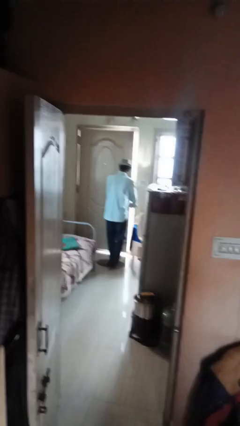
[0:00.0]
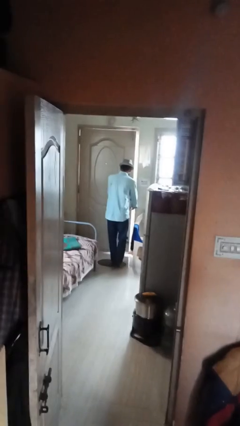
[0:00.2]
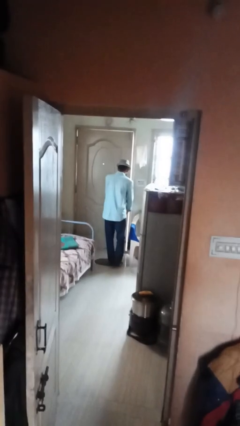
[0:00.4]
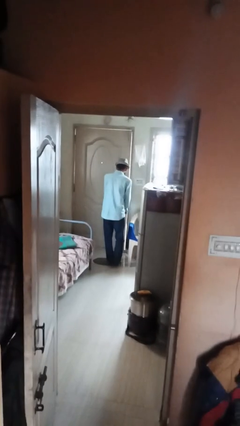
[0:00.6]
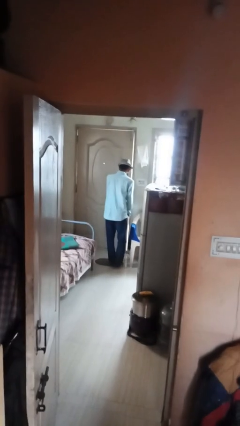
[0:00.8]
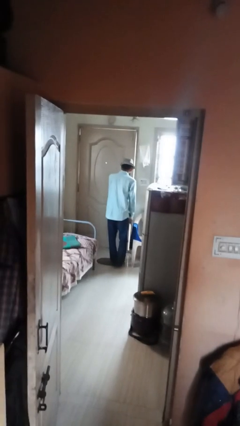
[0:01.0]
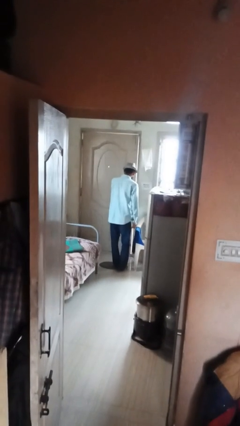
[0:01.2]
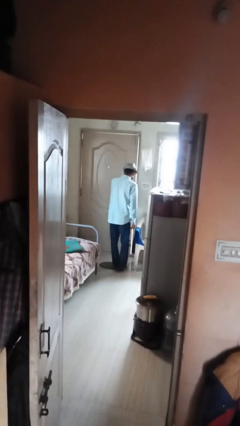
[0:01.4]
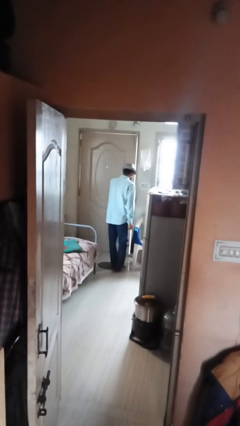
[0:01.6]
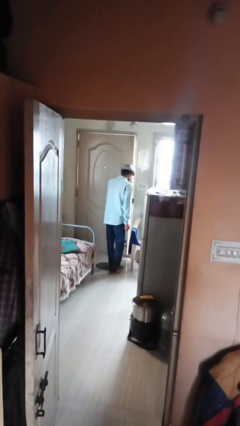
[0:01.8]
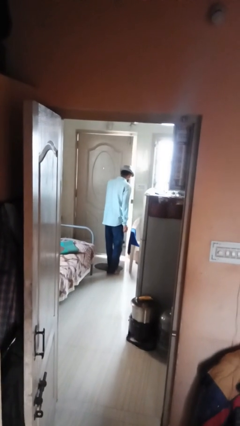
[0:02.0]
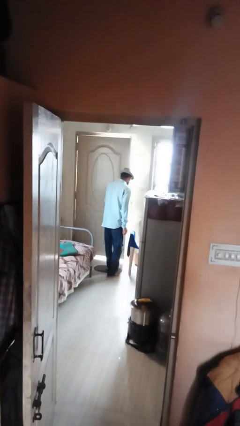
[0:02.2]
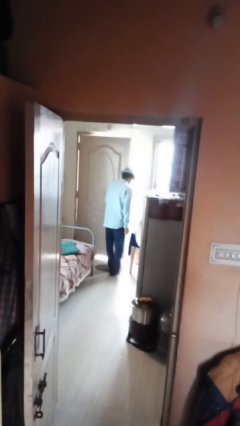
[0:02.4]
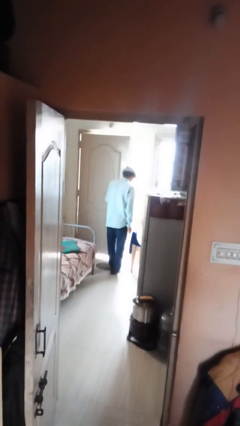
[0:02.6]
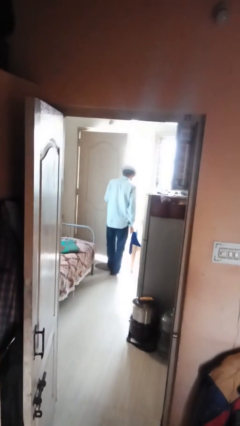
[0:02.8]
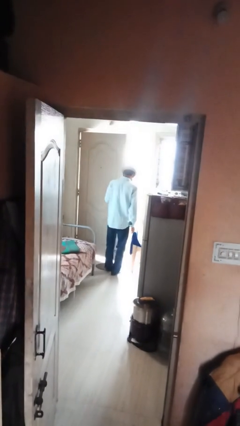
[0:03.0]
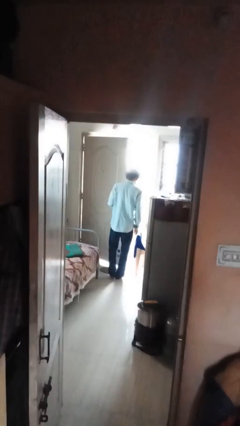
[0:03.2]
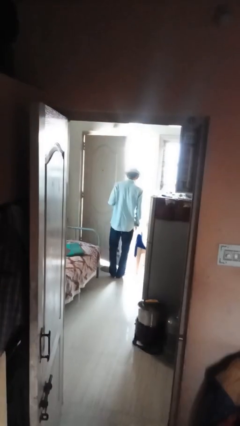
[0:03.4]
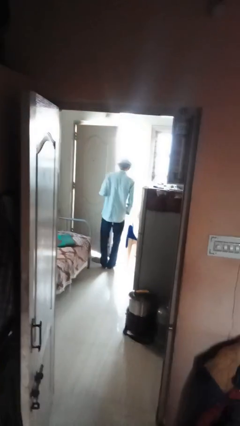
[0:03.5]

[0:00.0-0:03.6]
person closes facility door

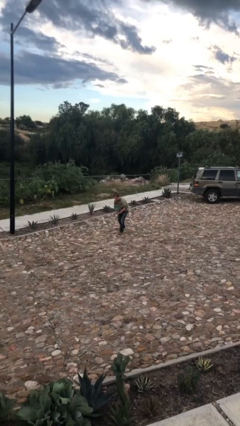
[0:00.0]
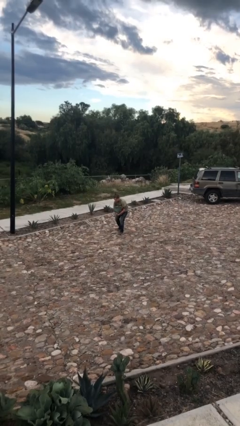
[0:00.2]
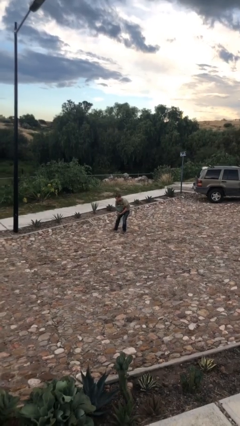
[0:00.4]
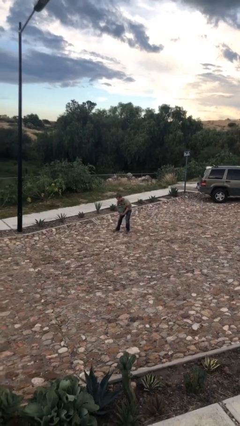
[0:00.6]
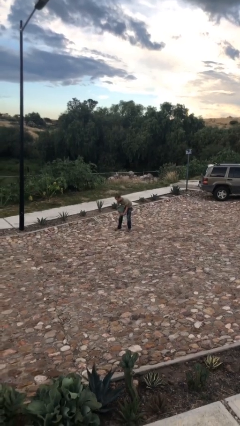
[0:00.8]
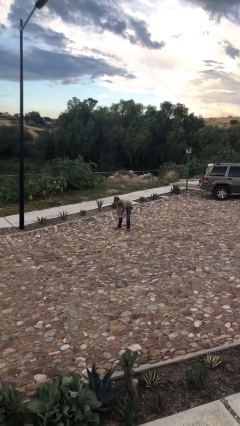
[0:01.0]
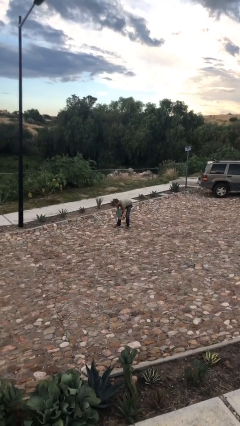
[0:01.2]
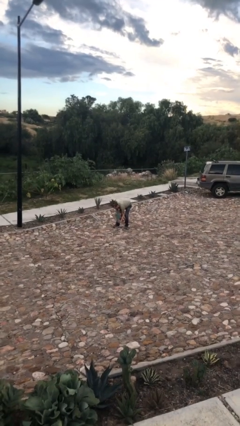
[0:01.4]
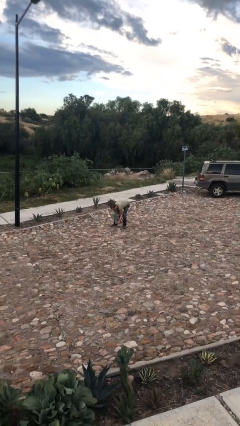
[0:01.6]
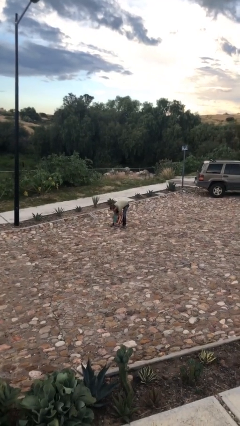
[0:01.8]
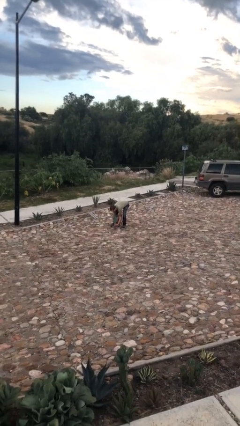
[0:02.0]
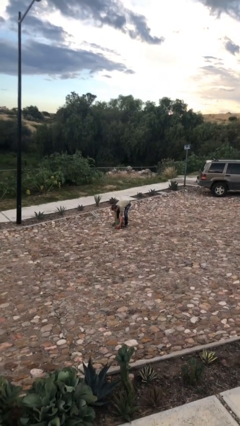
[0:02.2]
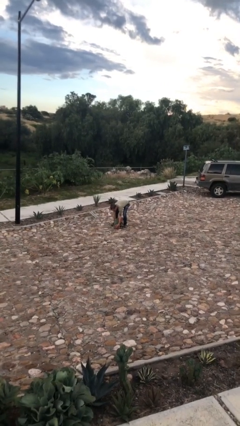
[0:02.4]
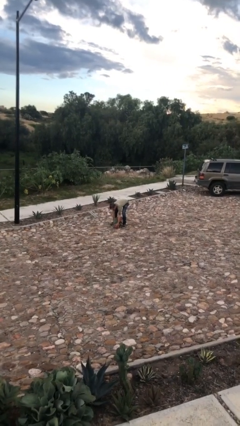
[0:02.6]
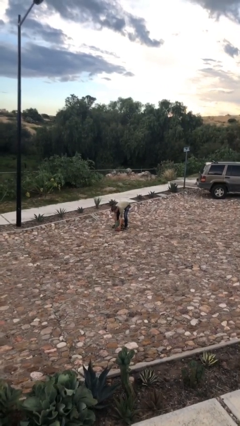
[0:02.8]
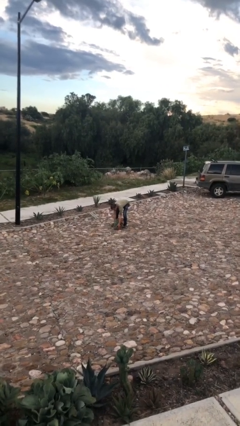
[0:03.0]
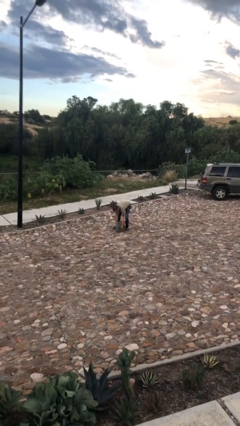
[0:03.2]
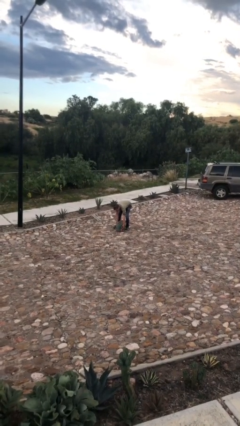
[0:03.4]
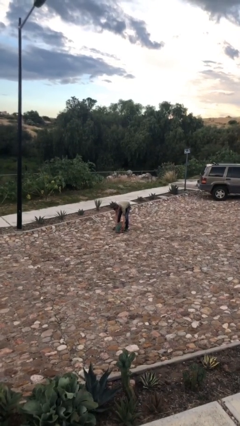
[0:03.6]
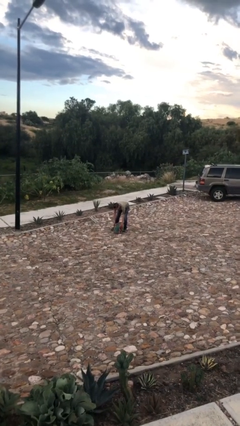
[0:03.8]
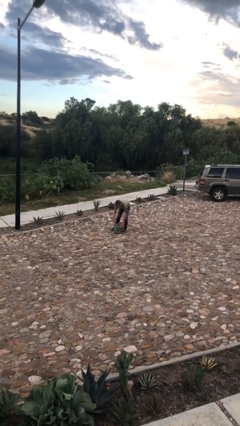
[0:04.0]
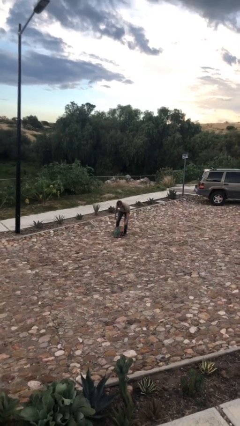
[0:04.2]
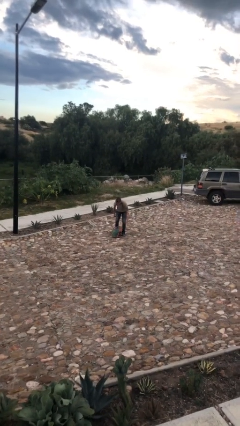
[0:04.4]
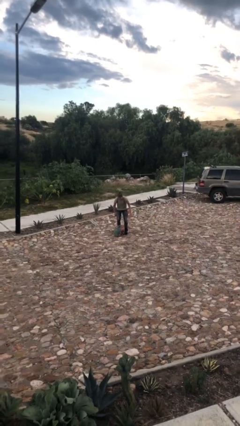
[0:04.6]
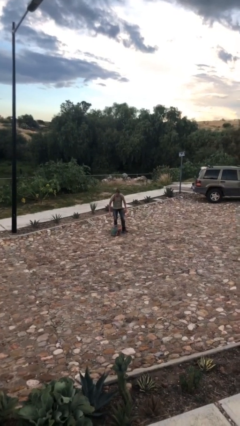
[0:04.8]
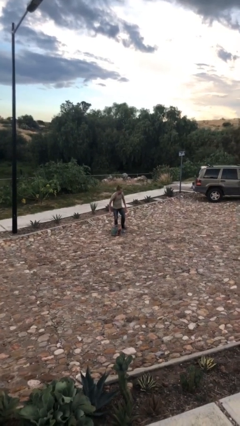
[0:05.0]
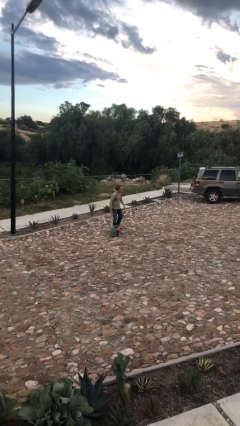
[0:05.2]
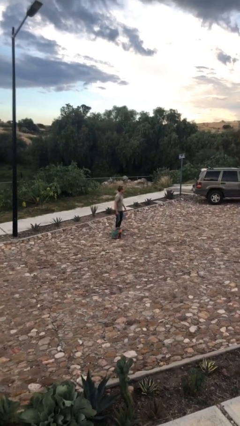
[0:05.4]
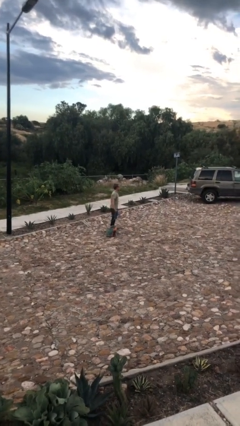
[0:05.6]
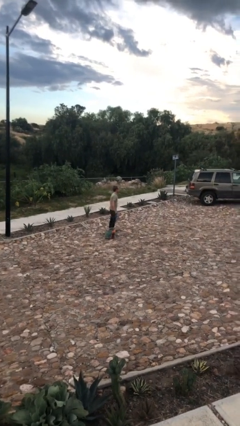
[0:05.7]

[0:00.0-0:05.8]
person puts down object on floor

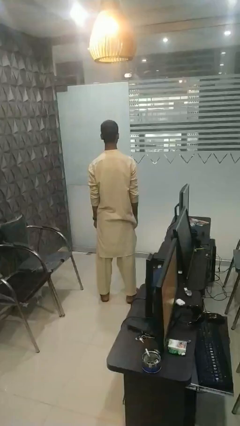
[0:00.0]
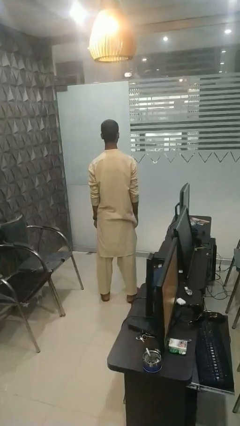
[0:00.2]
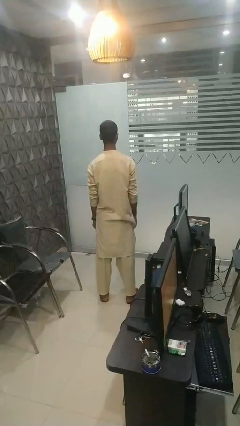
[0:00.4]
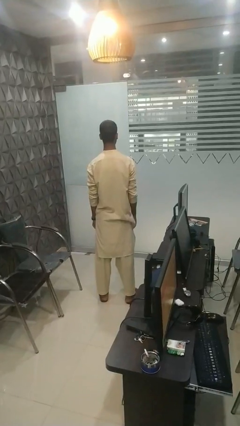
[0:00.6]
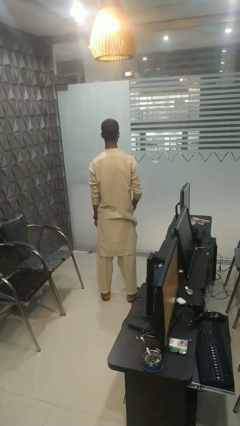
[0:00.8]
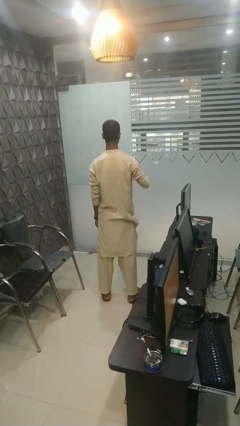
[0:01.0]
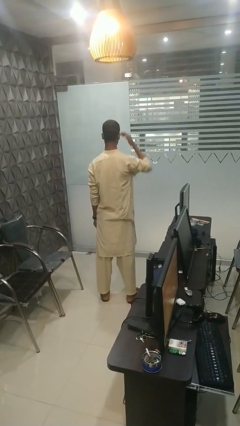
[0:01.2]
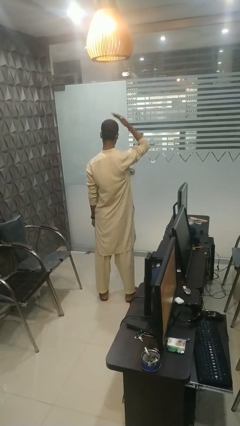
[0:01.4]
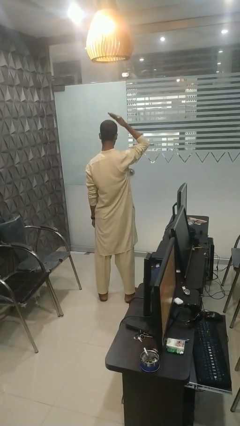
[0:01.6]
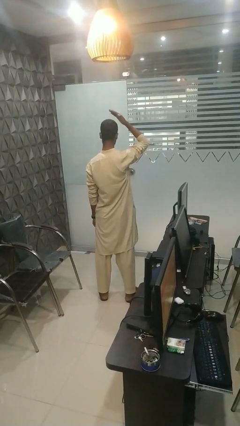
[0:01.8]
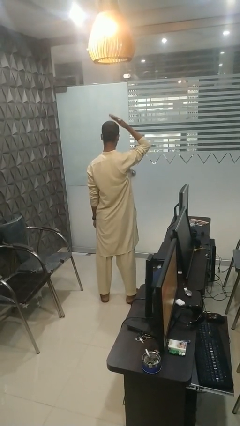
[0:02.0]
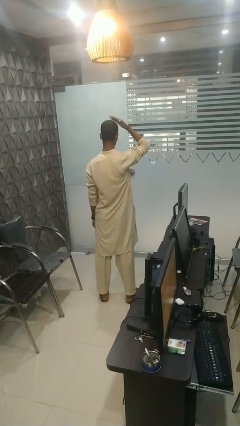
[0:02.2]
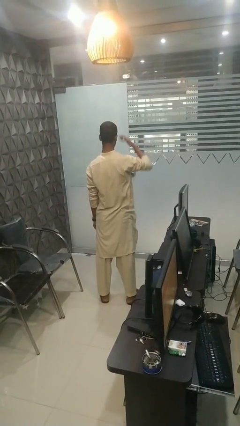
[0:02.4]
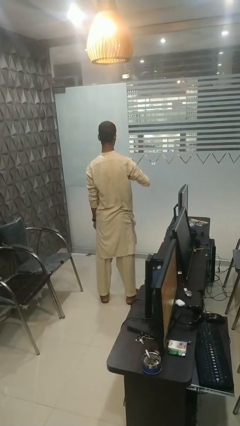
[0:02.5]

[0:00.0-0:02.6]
person pats head

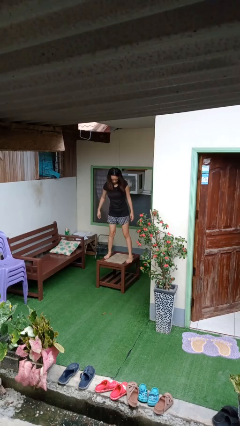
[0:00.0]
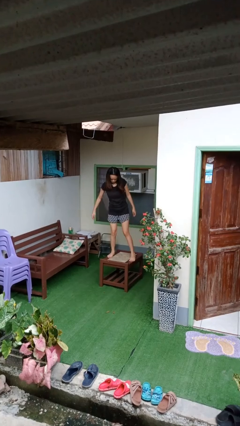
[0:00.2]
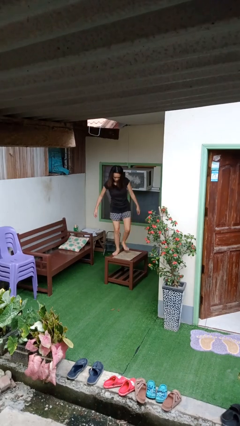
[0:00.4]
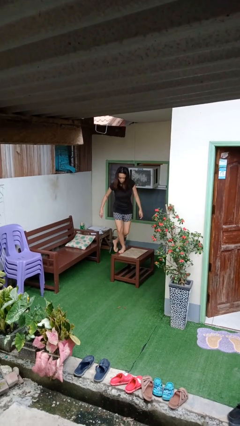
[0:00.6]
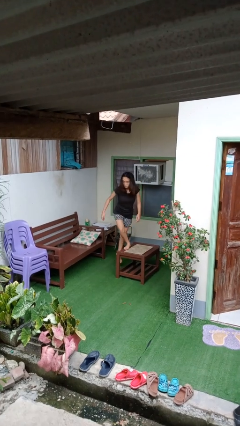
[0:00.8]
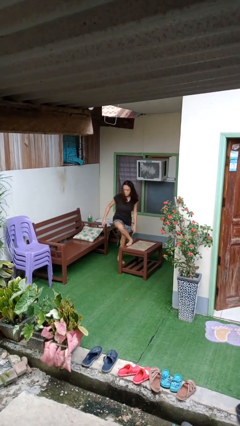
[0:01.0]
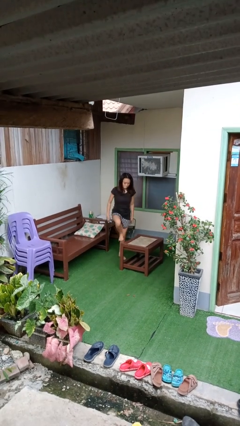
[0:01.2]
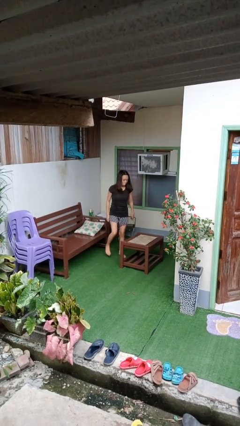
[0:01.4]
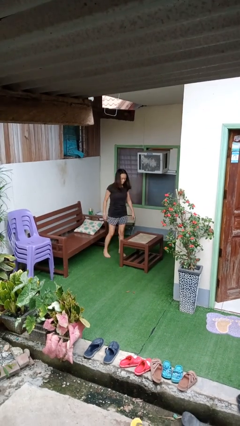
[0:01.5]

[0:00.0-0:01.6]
person climbs off table

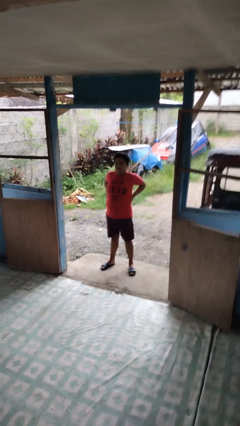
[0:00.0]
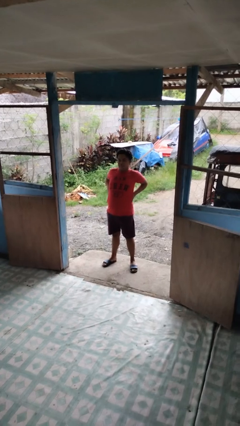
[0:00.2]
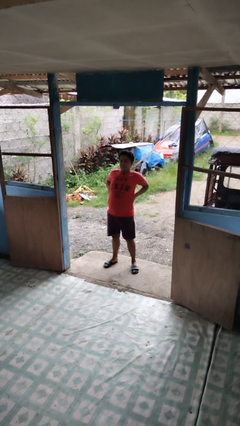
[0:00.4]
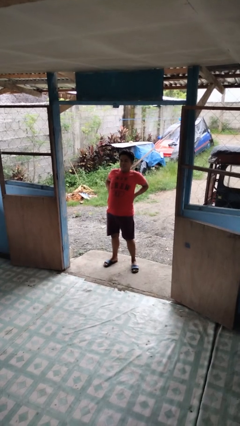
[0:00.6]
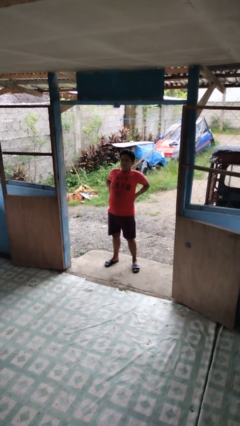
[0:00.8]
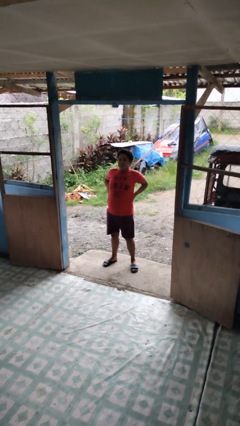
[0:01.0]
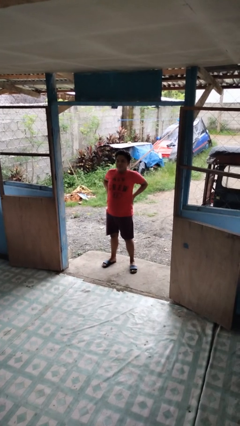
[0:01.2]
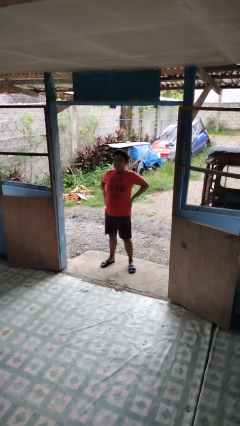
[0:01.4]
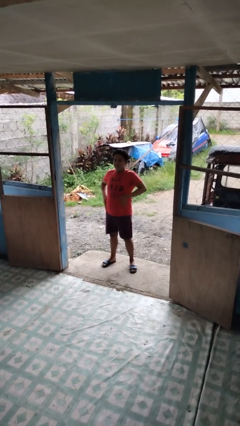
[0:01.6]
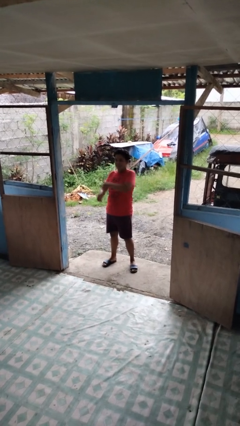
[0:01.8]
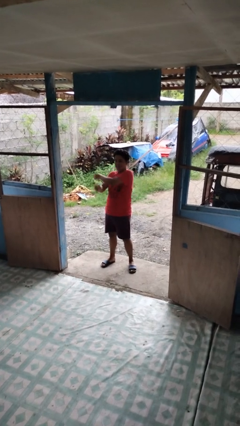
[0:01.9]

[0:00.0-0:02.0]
person stretches back

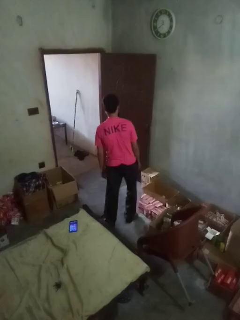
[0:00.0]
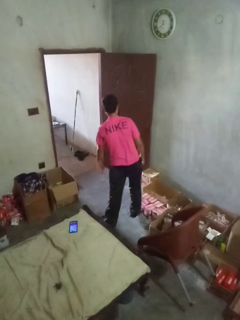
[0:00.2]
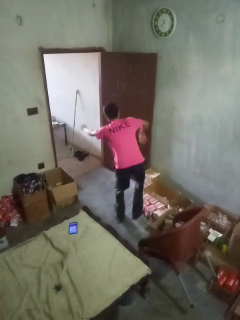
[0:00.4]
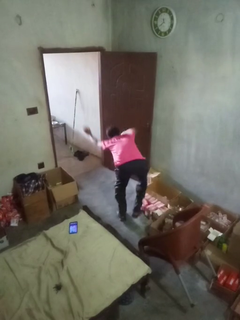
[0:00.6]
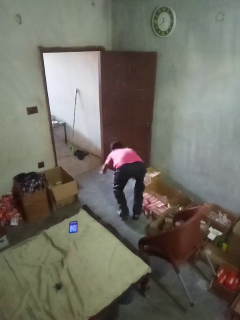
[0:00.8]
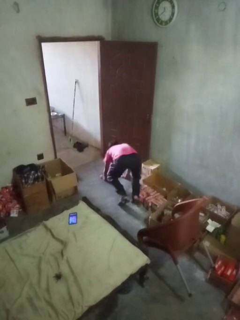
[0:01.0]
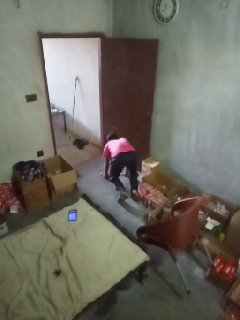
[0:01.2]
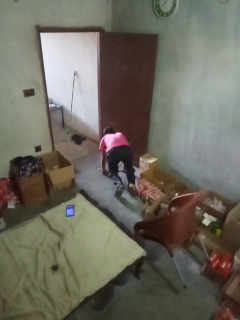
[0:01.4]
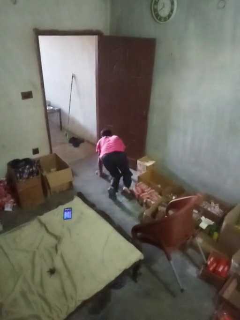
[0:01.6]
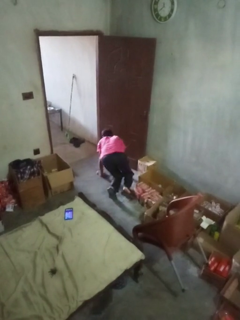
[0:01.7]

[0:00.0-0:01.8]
person trips on object on floor

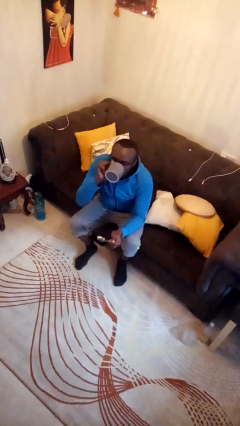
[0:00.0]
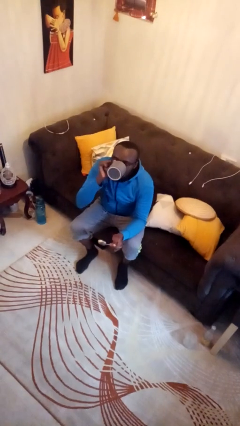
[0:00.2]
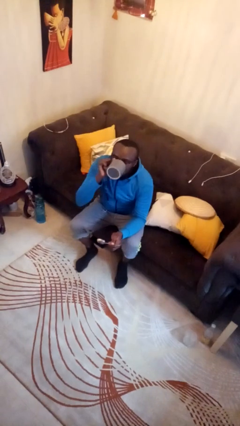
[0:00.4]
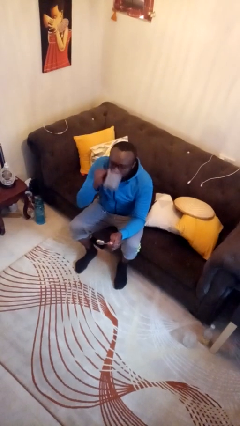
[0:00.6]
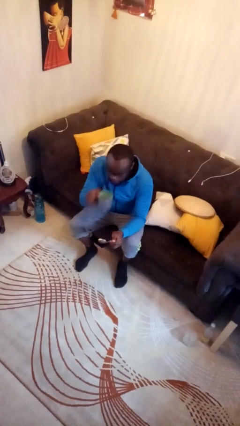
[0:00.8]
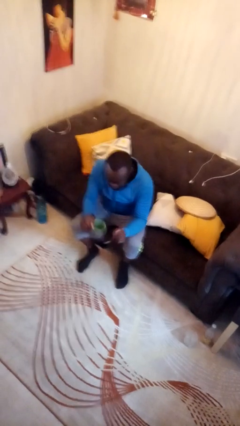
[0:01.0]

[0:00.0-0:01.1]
person drinks from mug
